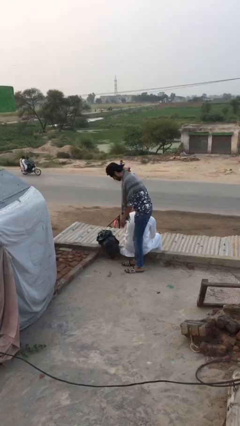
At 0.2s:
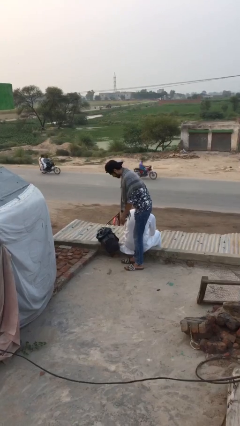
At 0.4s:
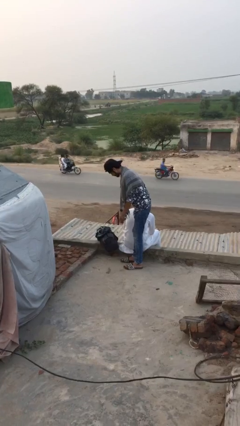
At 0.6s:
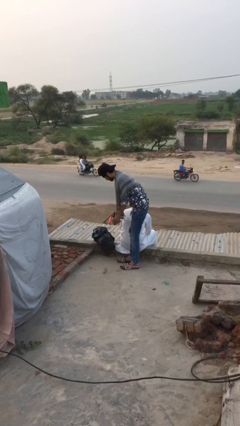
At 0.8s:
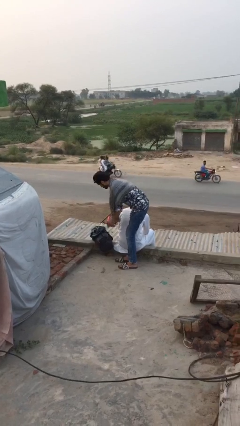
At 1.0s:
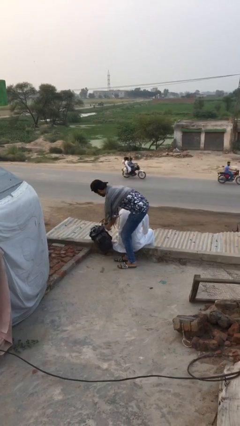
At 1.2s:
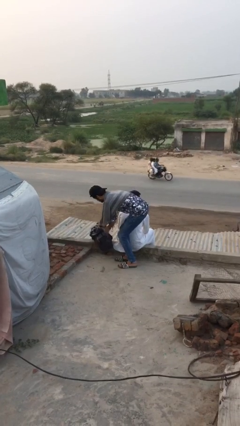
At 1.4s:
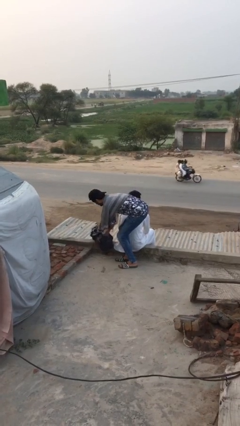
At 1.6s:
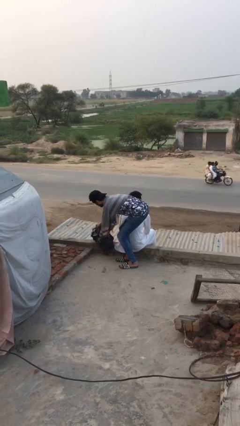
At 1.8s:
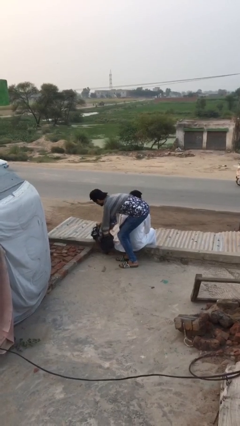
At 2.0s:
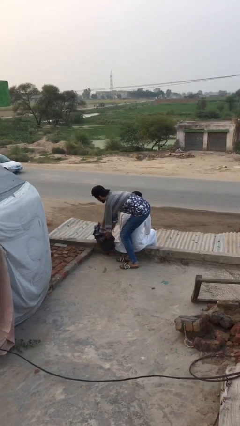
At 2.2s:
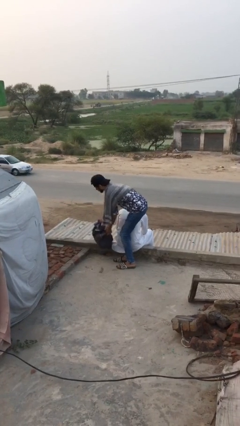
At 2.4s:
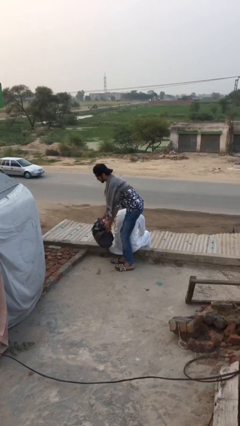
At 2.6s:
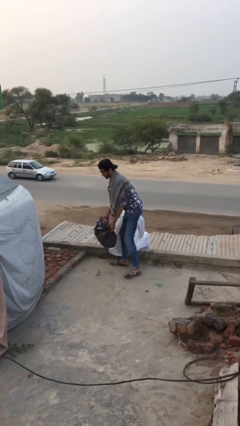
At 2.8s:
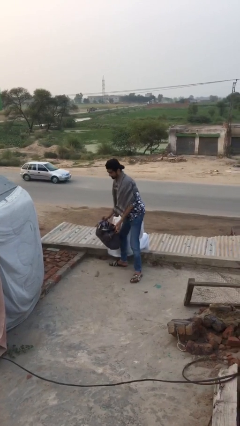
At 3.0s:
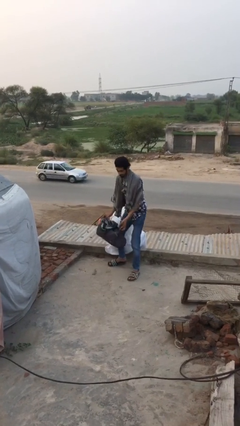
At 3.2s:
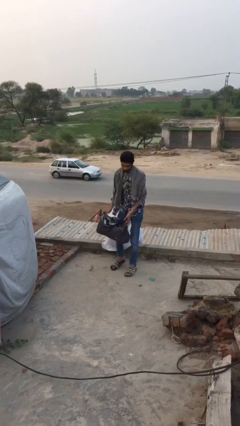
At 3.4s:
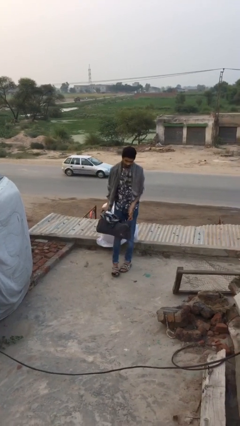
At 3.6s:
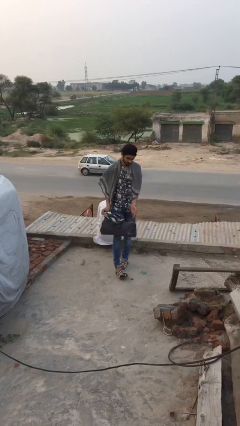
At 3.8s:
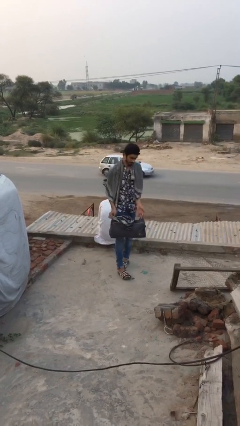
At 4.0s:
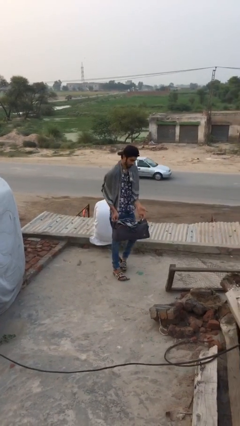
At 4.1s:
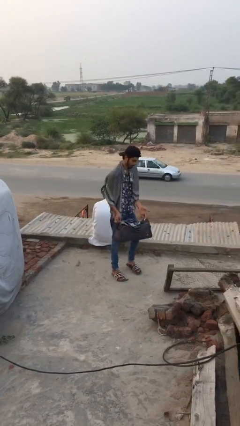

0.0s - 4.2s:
person steals object from person

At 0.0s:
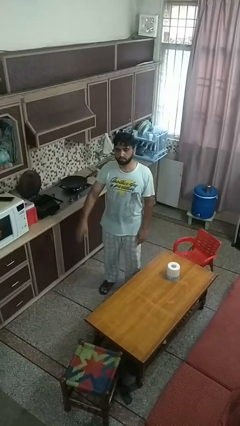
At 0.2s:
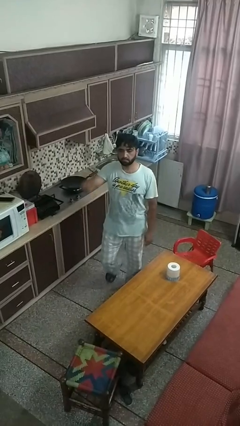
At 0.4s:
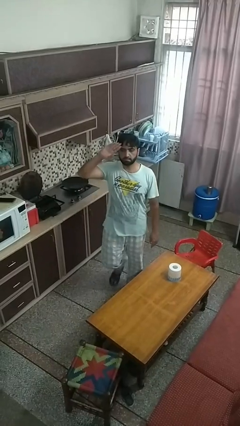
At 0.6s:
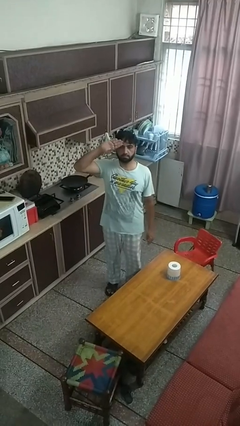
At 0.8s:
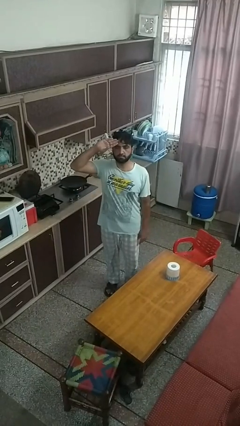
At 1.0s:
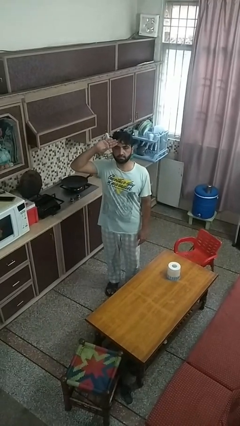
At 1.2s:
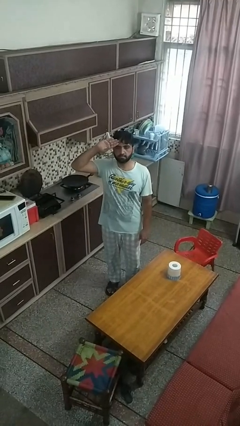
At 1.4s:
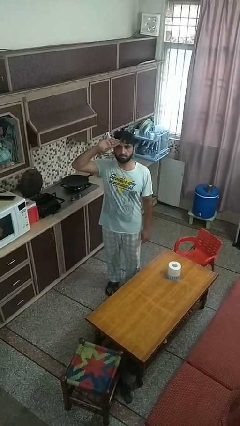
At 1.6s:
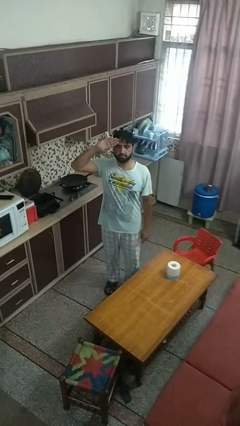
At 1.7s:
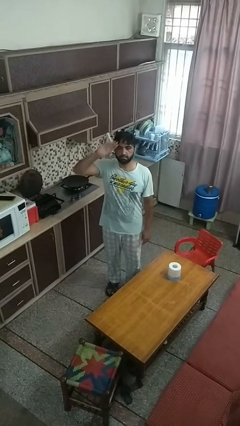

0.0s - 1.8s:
person salutes

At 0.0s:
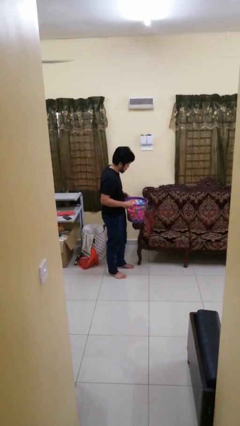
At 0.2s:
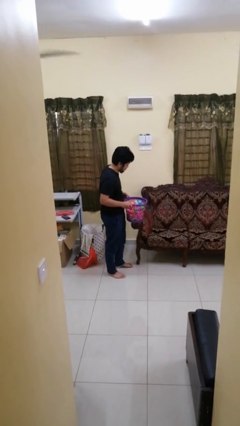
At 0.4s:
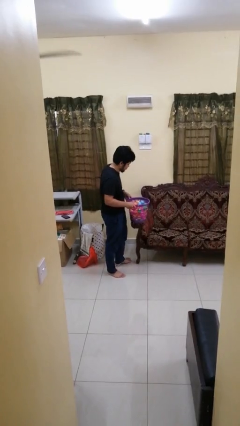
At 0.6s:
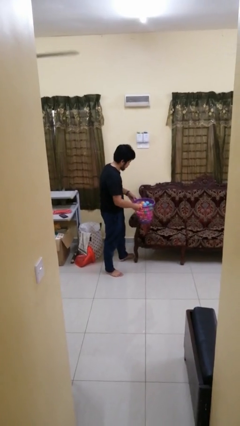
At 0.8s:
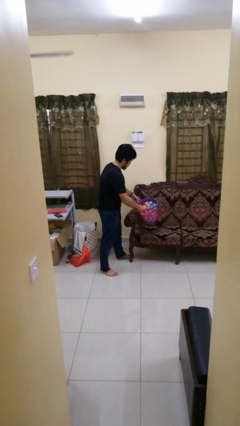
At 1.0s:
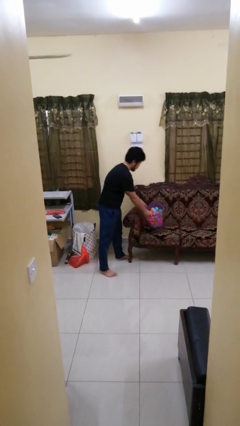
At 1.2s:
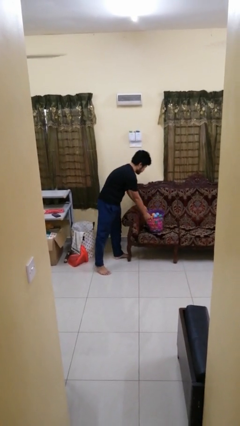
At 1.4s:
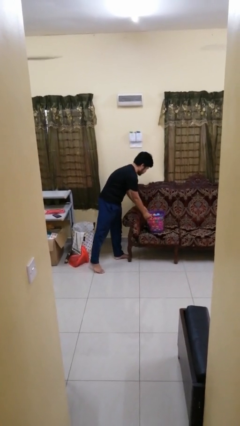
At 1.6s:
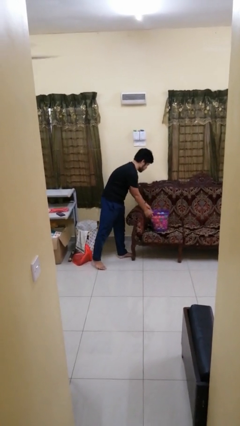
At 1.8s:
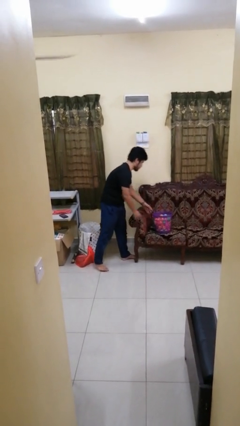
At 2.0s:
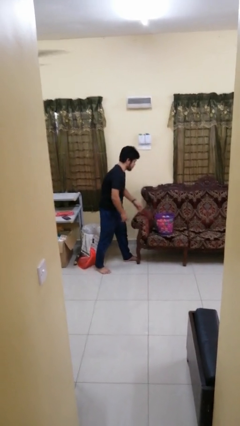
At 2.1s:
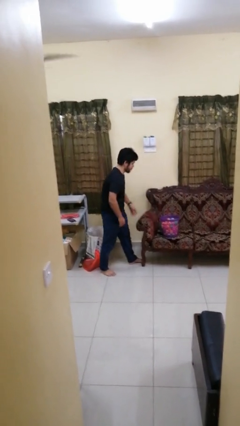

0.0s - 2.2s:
person picks up object from couch

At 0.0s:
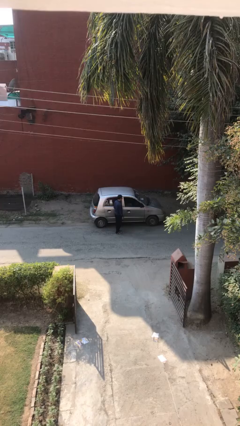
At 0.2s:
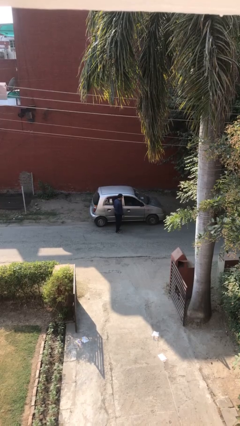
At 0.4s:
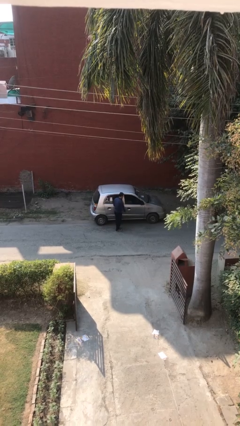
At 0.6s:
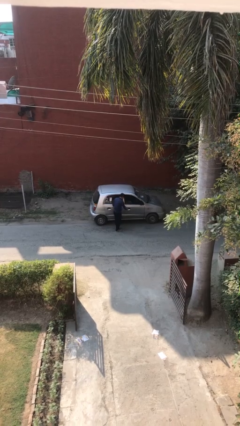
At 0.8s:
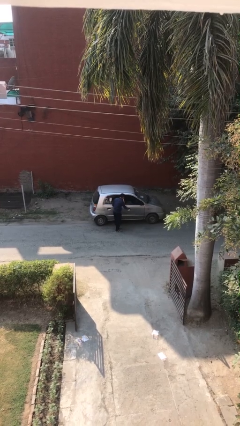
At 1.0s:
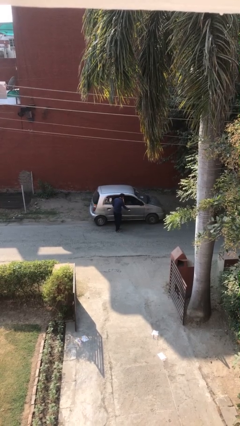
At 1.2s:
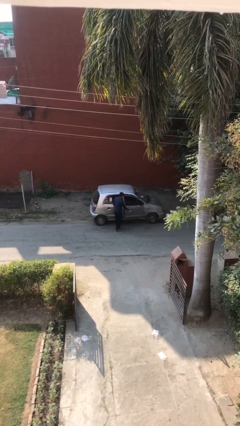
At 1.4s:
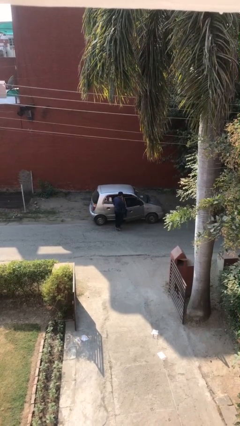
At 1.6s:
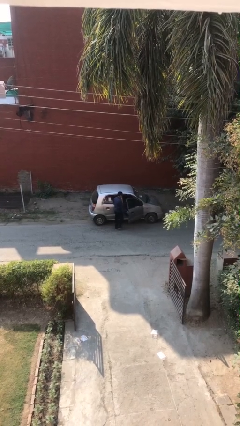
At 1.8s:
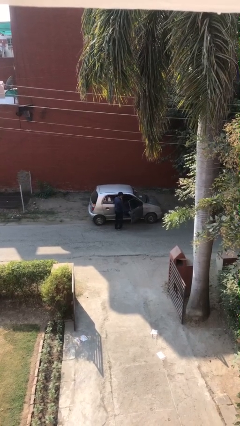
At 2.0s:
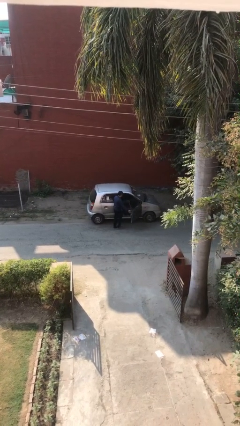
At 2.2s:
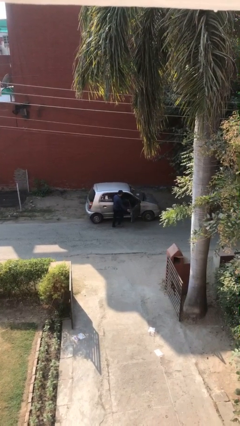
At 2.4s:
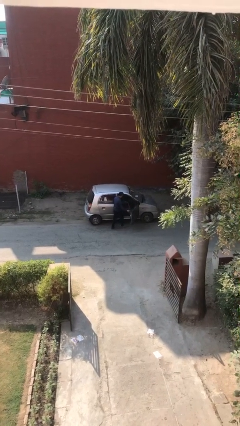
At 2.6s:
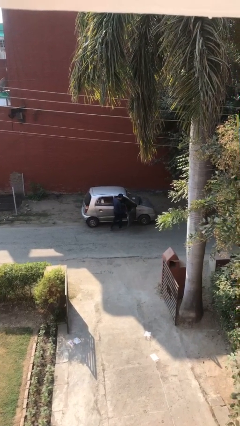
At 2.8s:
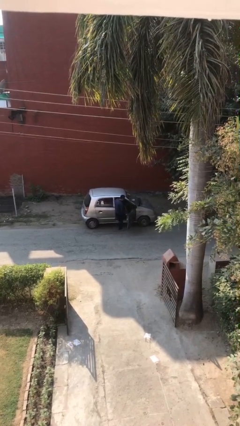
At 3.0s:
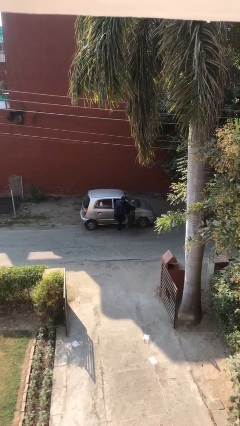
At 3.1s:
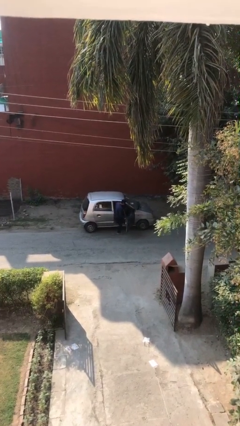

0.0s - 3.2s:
person opens car door

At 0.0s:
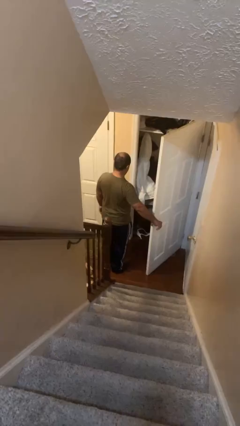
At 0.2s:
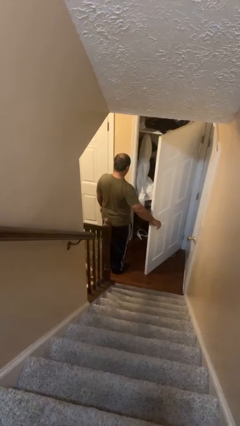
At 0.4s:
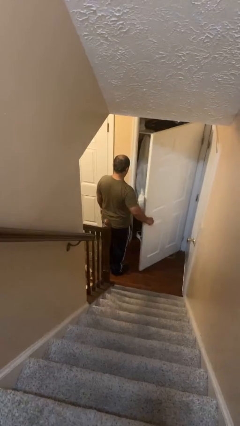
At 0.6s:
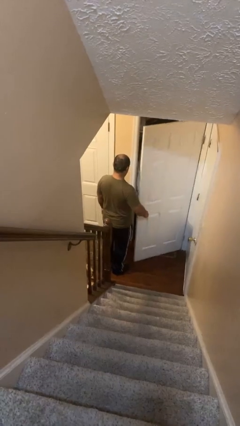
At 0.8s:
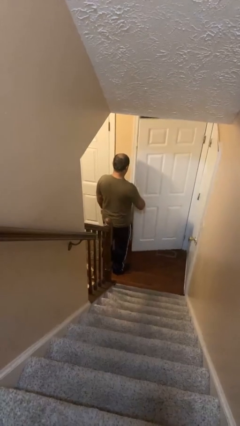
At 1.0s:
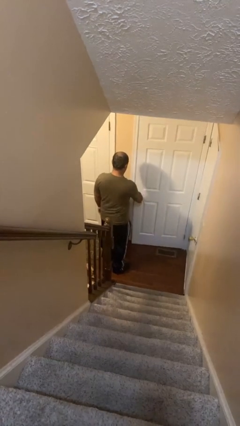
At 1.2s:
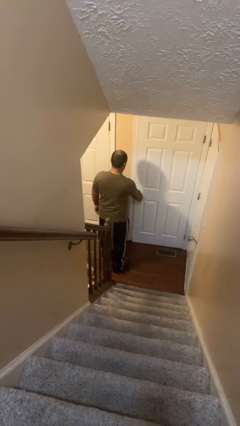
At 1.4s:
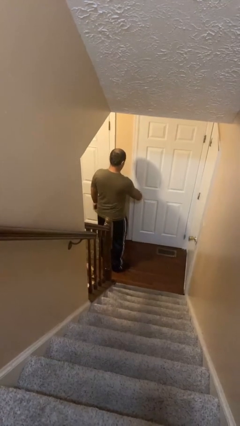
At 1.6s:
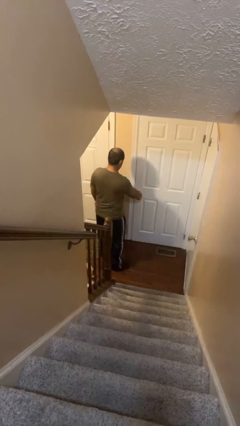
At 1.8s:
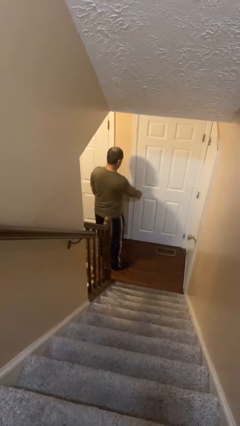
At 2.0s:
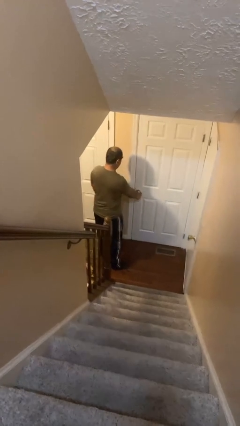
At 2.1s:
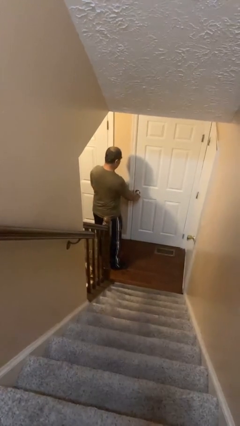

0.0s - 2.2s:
person closes facility door

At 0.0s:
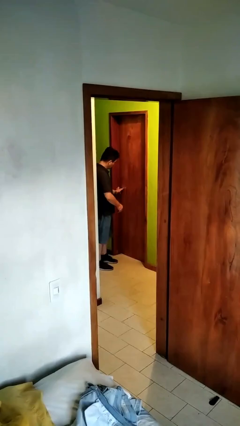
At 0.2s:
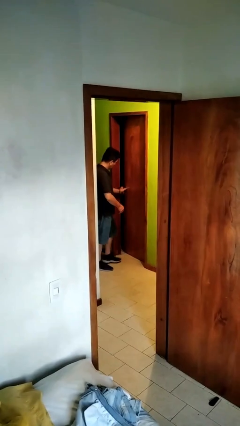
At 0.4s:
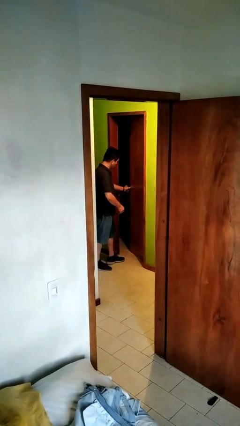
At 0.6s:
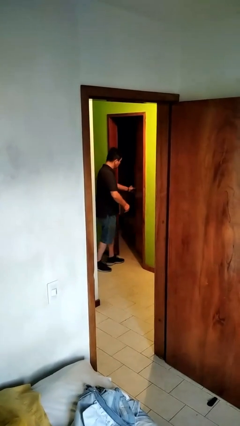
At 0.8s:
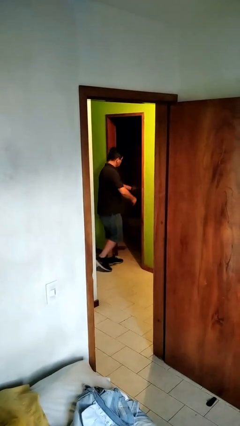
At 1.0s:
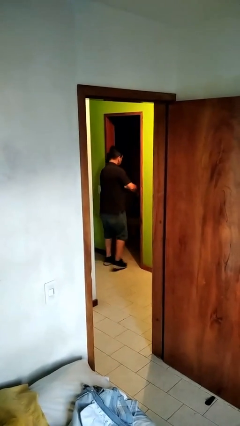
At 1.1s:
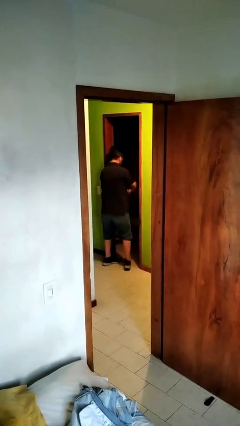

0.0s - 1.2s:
person opens facility door

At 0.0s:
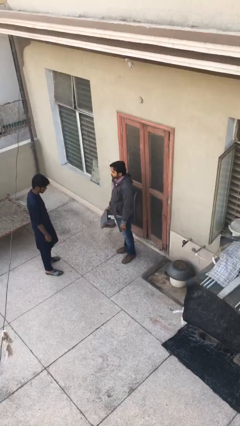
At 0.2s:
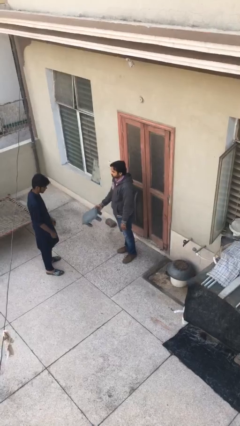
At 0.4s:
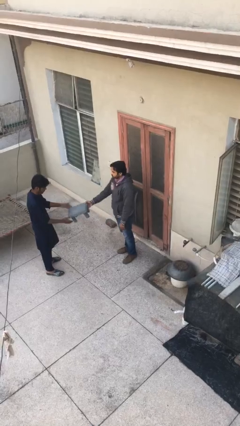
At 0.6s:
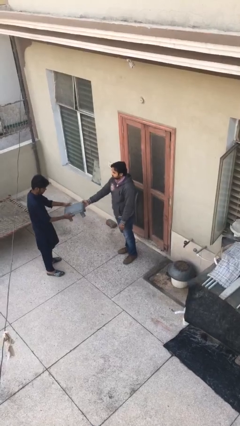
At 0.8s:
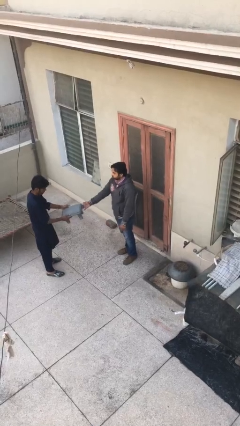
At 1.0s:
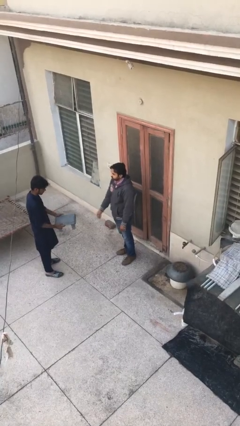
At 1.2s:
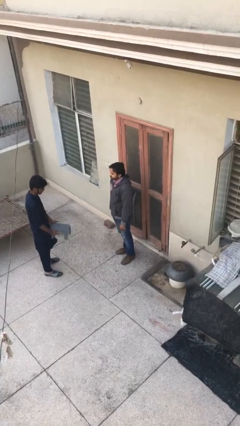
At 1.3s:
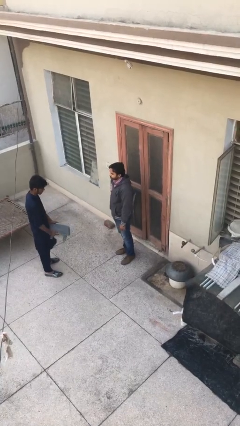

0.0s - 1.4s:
person transfers object to person

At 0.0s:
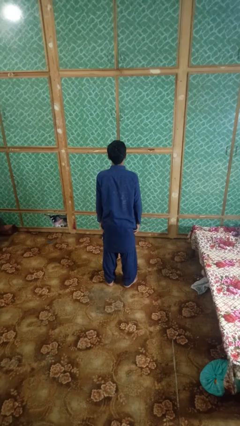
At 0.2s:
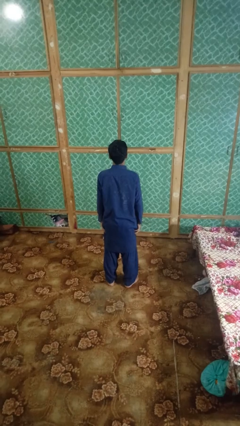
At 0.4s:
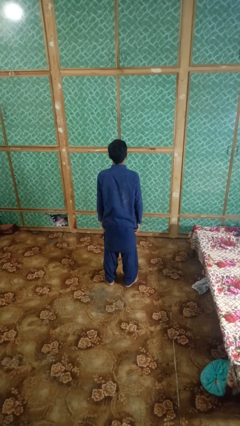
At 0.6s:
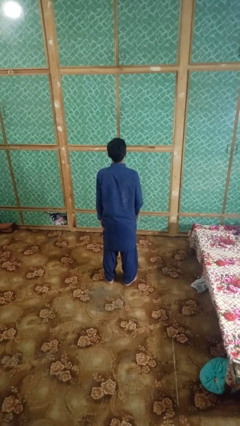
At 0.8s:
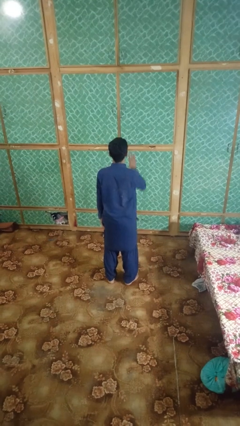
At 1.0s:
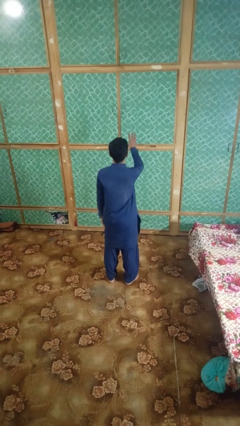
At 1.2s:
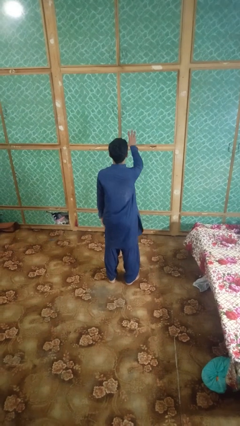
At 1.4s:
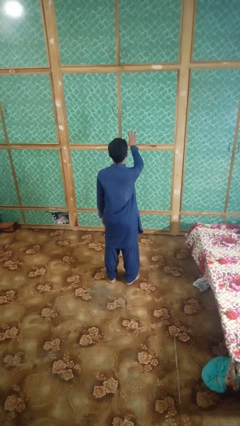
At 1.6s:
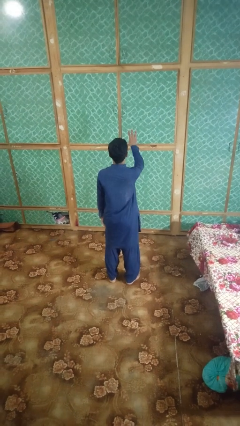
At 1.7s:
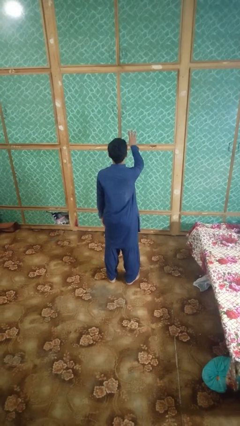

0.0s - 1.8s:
person gestures number three
